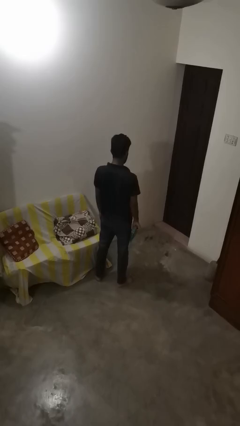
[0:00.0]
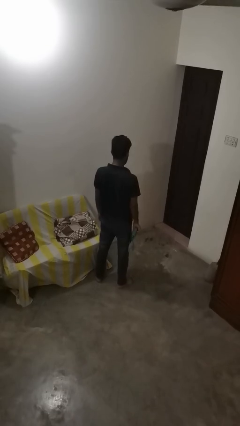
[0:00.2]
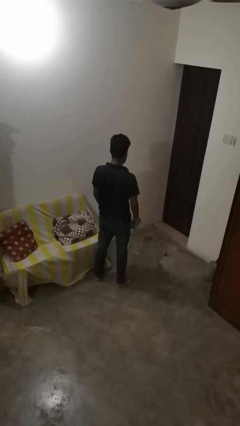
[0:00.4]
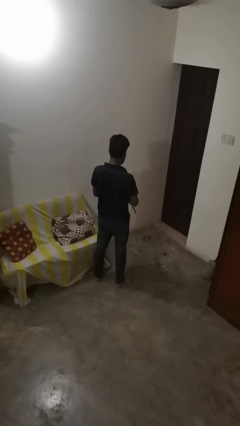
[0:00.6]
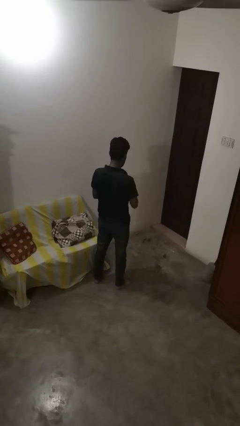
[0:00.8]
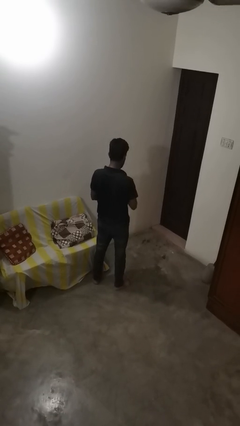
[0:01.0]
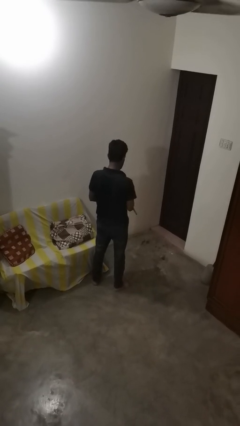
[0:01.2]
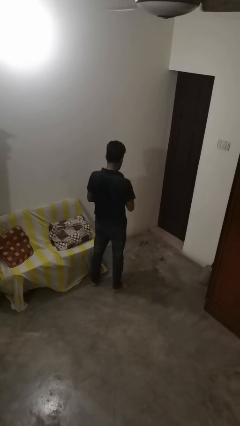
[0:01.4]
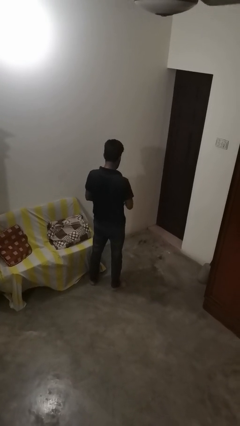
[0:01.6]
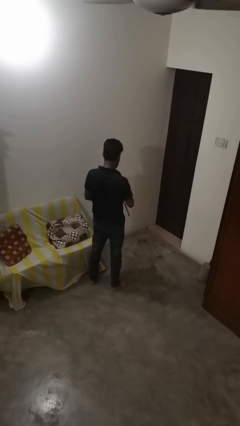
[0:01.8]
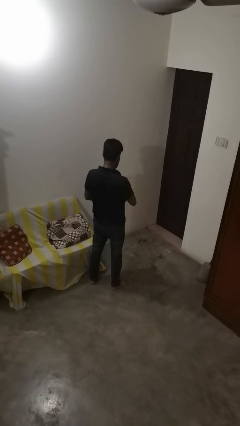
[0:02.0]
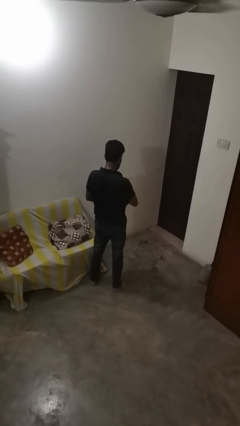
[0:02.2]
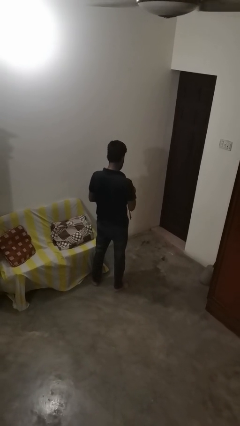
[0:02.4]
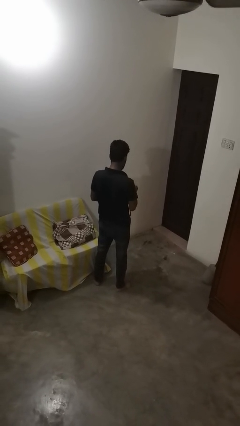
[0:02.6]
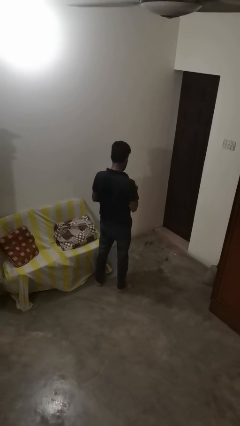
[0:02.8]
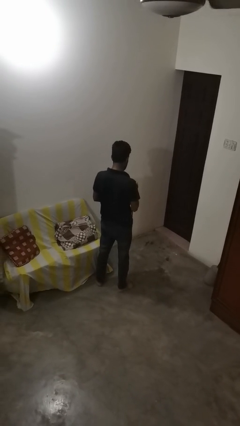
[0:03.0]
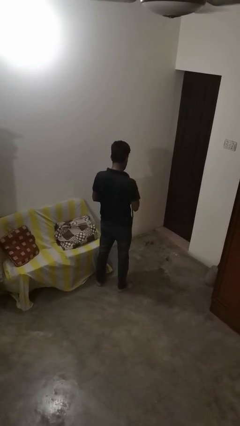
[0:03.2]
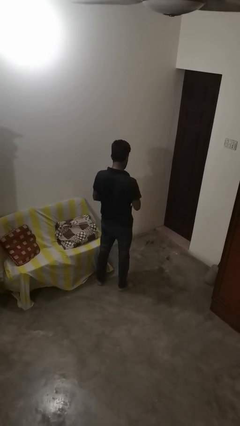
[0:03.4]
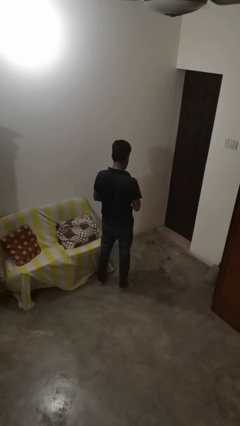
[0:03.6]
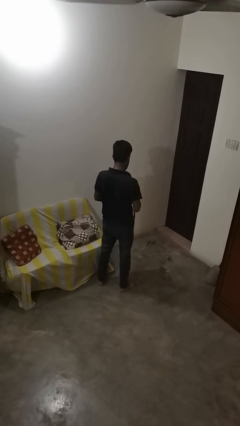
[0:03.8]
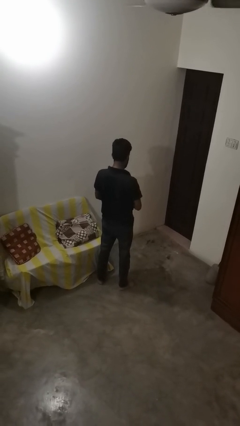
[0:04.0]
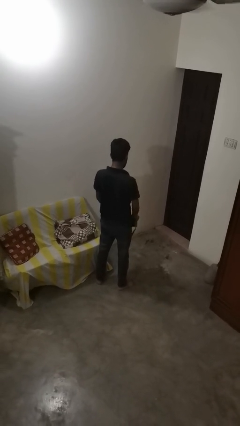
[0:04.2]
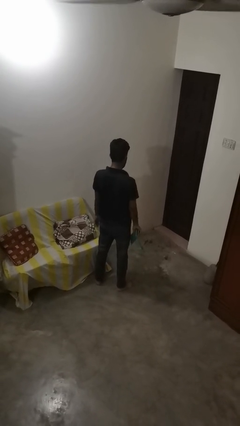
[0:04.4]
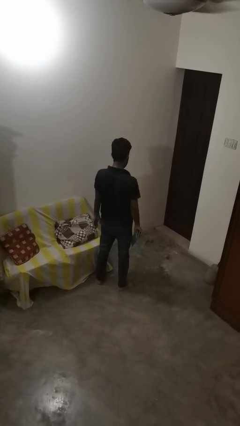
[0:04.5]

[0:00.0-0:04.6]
person searches in bag

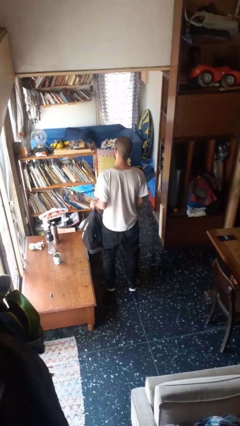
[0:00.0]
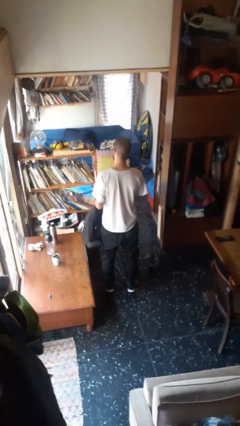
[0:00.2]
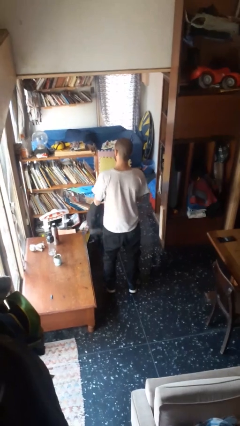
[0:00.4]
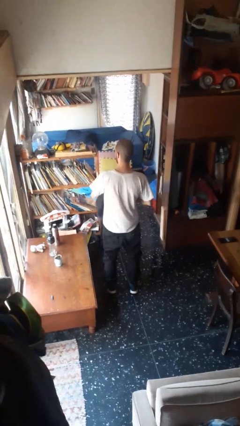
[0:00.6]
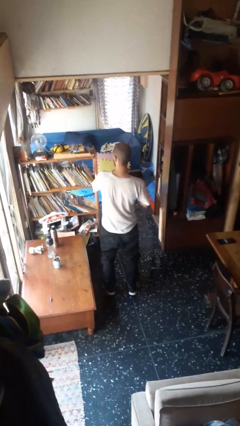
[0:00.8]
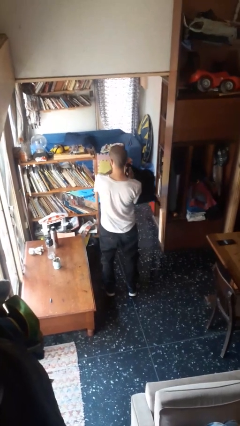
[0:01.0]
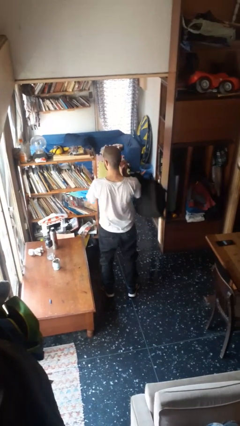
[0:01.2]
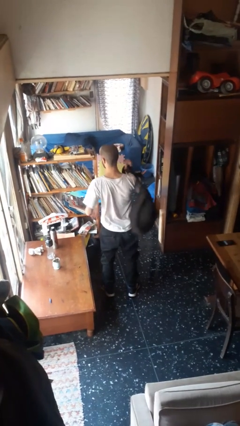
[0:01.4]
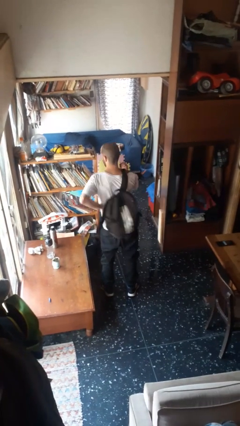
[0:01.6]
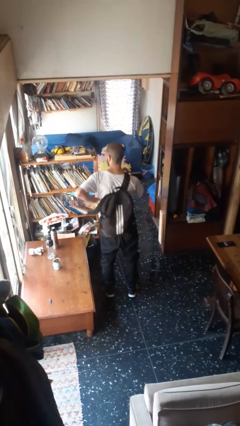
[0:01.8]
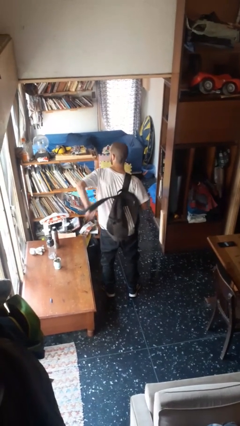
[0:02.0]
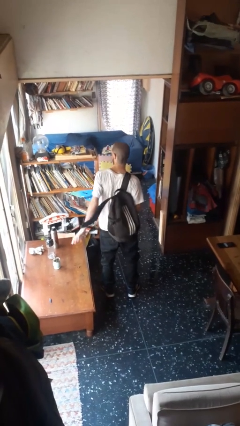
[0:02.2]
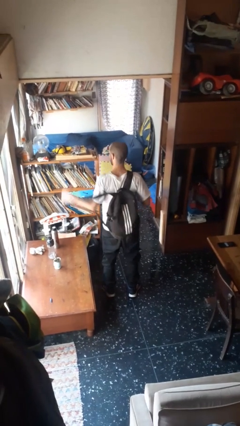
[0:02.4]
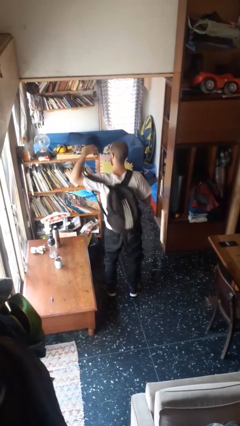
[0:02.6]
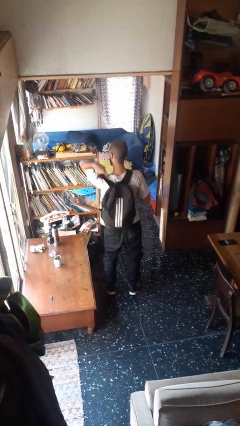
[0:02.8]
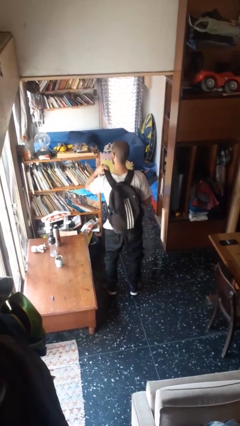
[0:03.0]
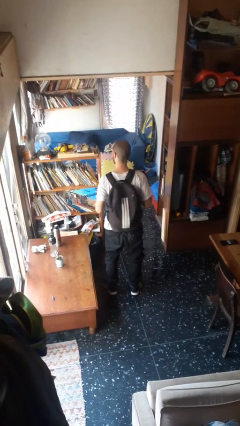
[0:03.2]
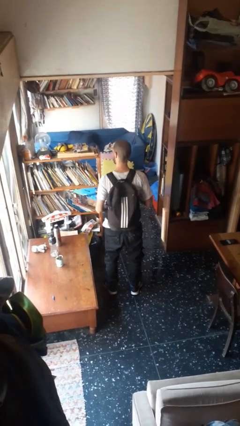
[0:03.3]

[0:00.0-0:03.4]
person puts on backpack

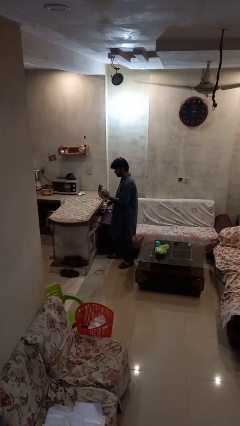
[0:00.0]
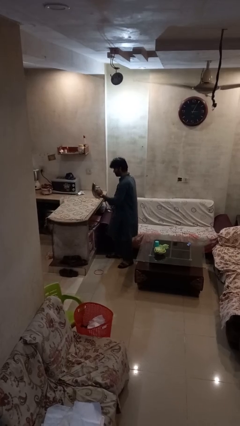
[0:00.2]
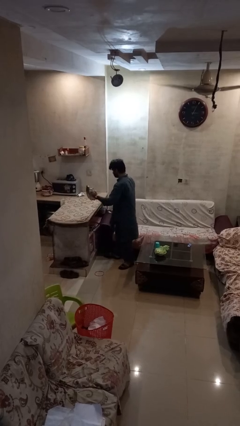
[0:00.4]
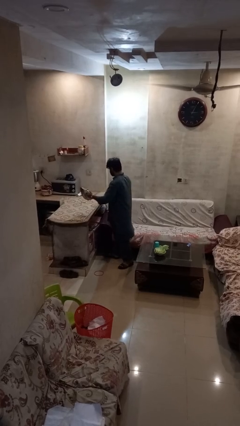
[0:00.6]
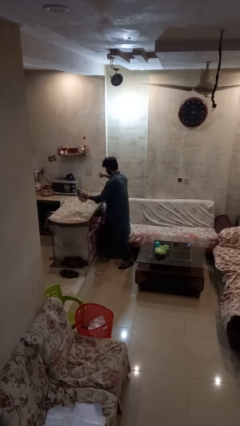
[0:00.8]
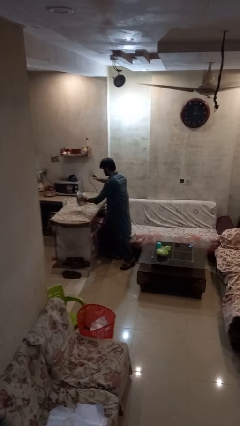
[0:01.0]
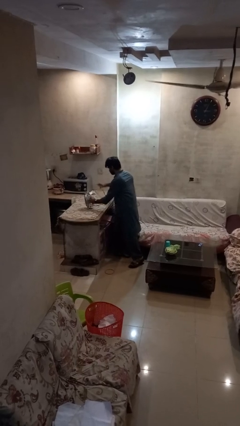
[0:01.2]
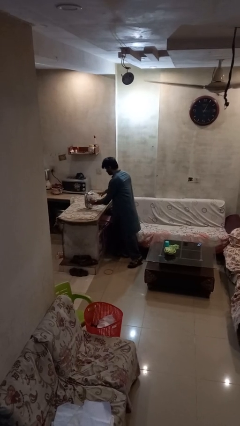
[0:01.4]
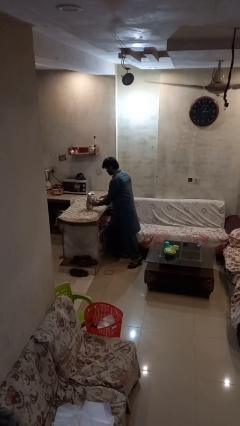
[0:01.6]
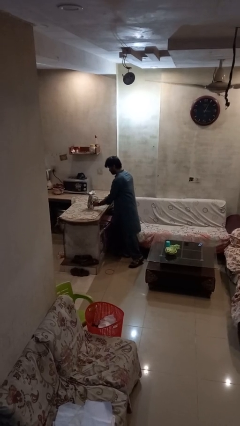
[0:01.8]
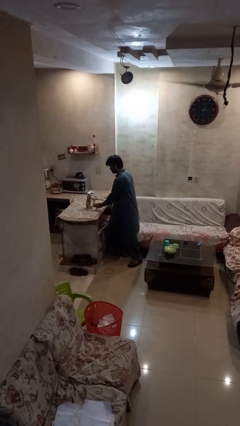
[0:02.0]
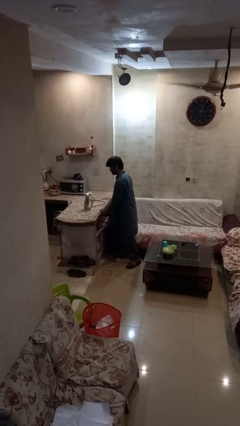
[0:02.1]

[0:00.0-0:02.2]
person puts down object on countertop

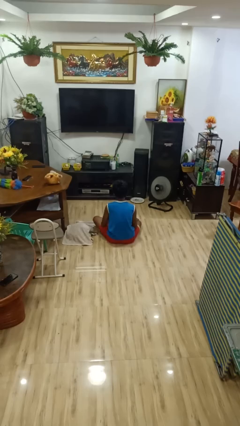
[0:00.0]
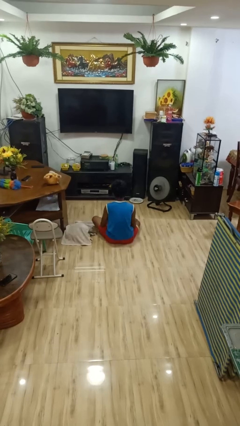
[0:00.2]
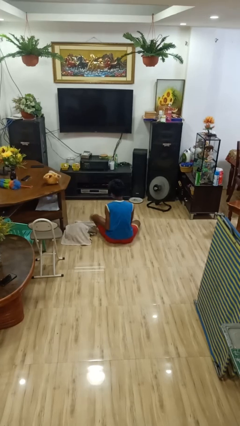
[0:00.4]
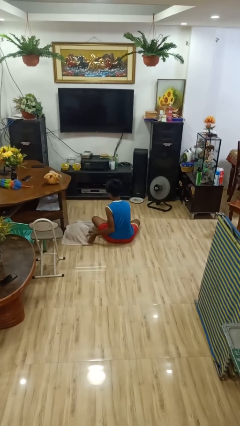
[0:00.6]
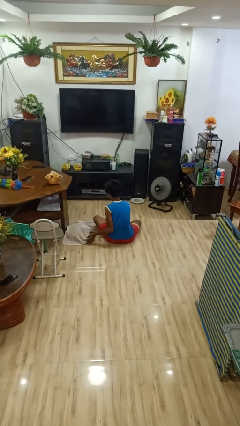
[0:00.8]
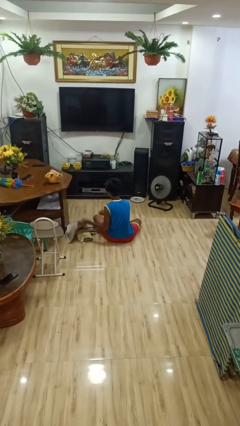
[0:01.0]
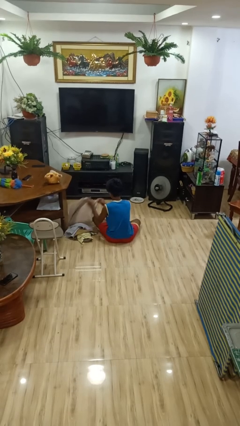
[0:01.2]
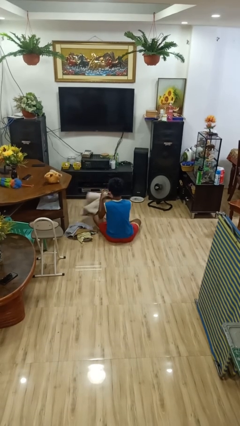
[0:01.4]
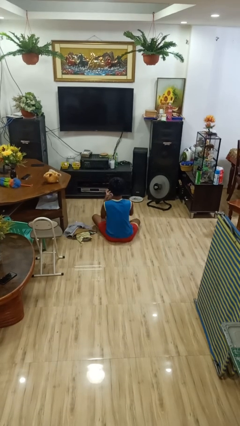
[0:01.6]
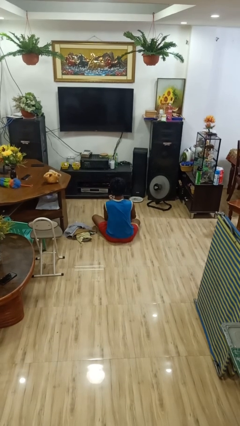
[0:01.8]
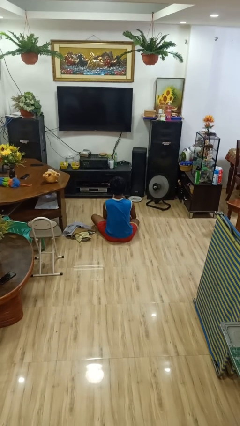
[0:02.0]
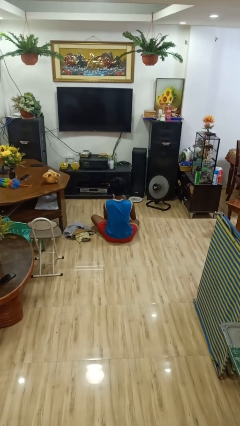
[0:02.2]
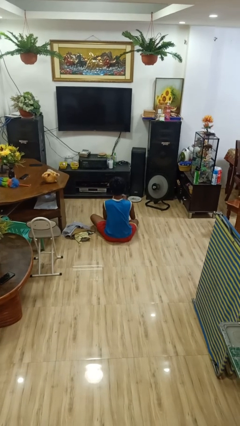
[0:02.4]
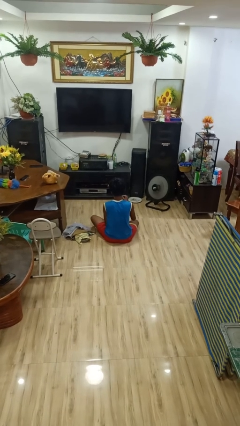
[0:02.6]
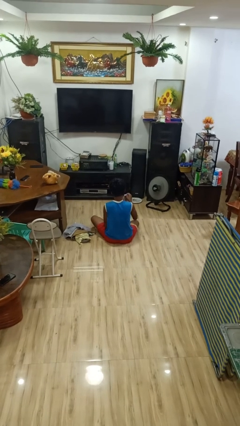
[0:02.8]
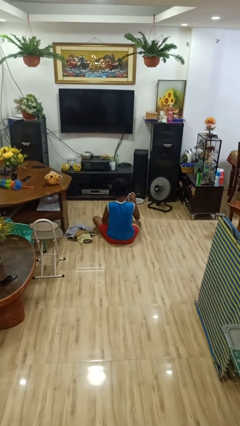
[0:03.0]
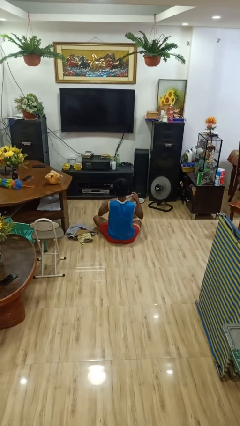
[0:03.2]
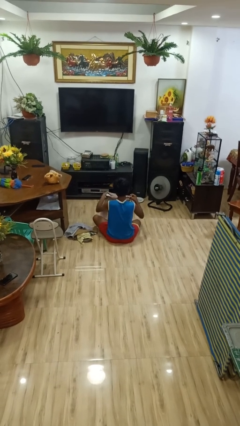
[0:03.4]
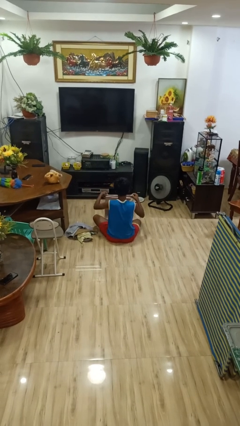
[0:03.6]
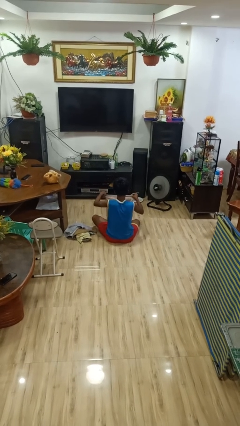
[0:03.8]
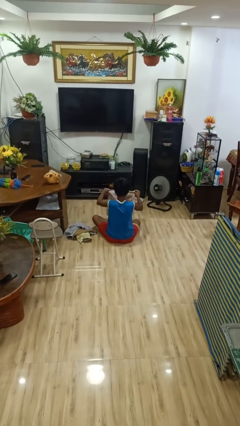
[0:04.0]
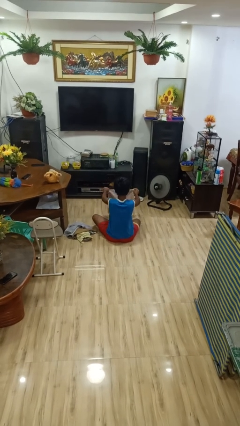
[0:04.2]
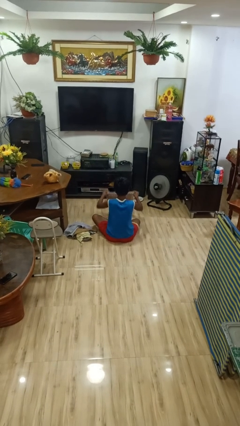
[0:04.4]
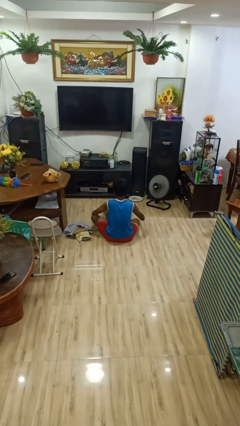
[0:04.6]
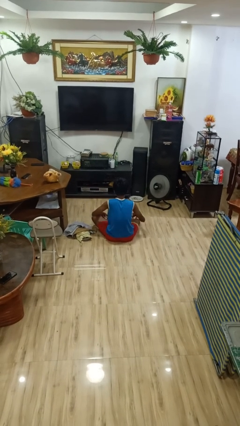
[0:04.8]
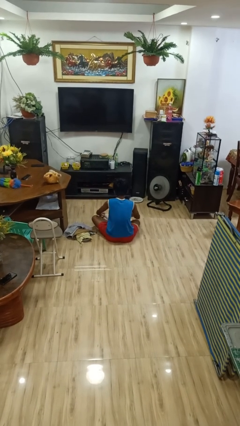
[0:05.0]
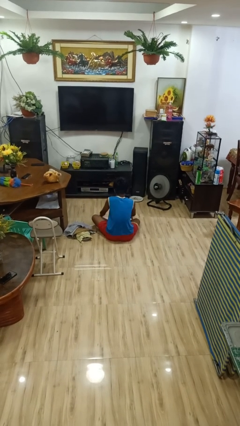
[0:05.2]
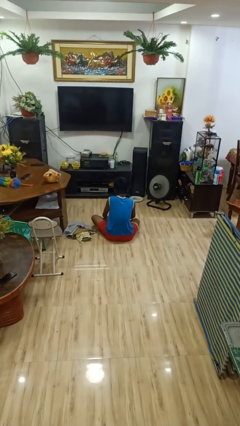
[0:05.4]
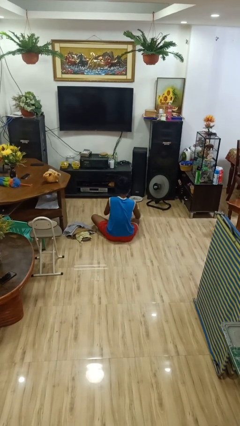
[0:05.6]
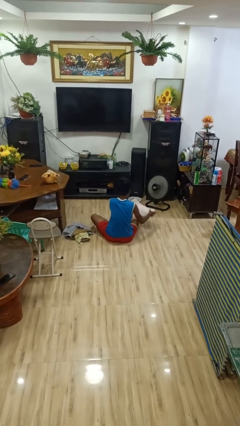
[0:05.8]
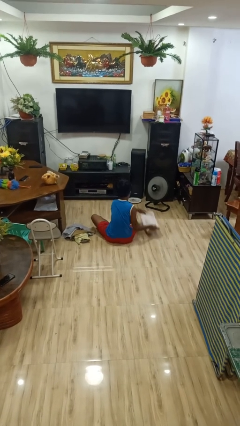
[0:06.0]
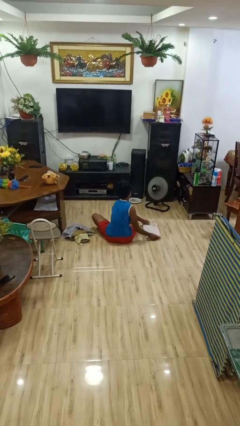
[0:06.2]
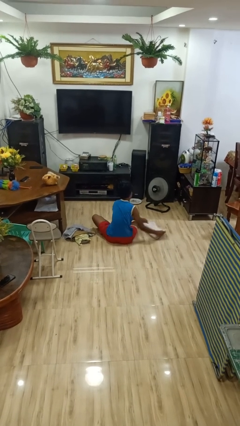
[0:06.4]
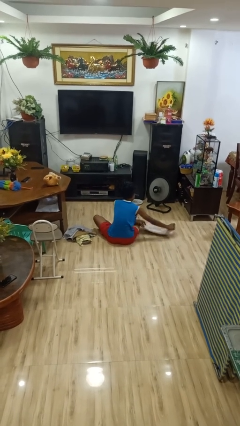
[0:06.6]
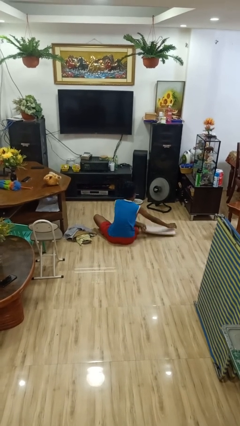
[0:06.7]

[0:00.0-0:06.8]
person folds towel

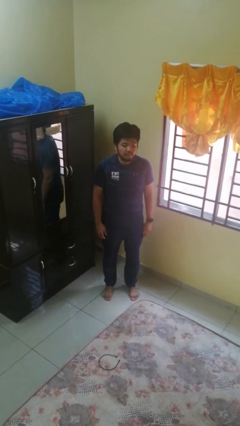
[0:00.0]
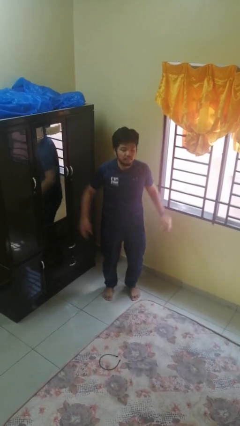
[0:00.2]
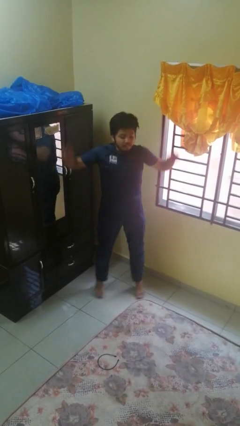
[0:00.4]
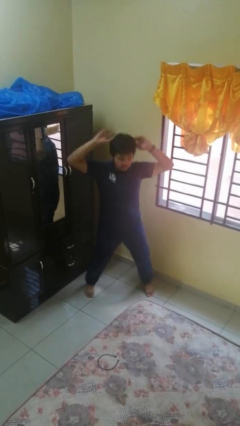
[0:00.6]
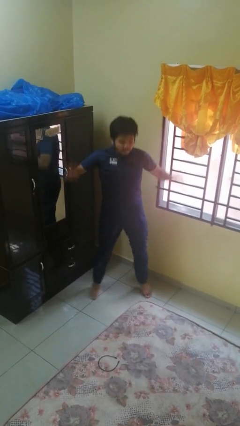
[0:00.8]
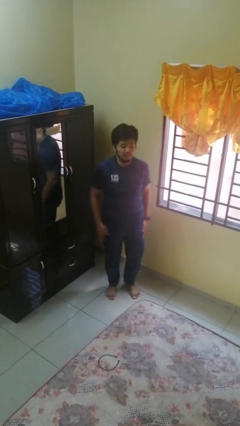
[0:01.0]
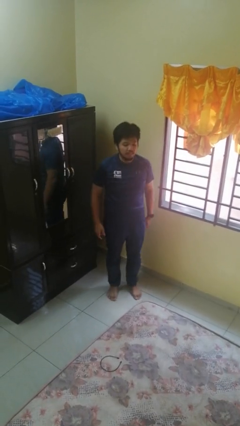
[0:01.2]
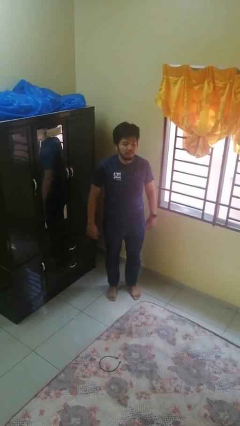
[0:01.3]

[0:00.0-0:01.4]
person exercises with jumping jacks
